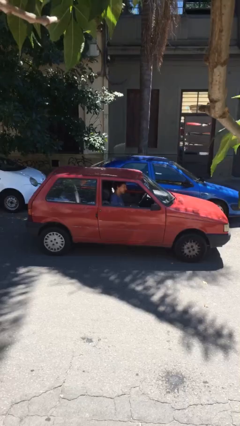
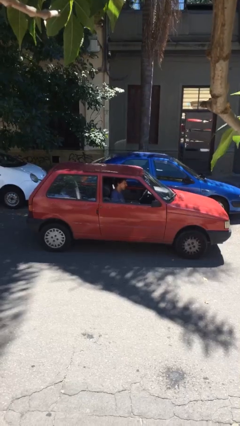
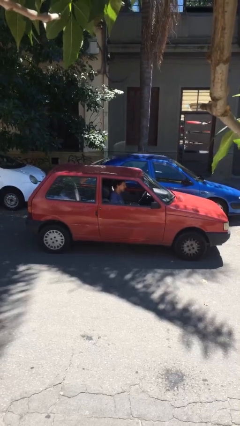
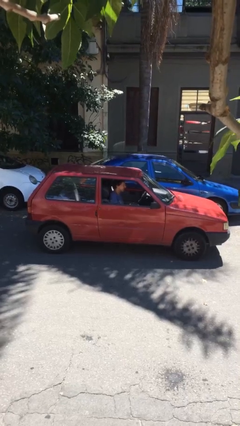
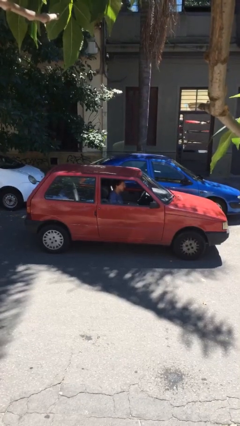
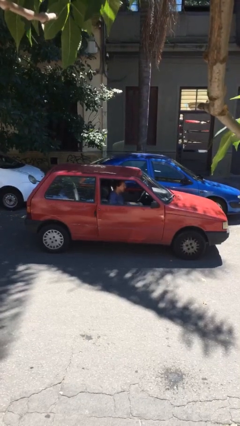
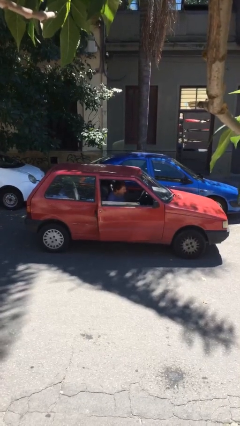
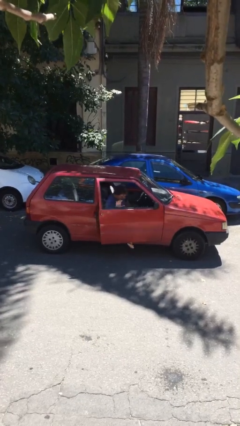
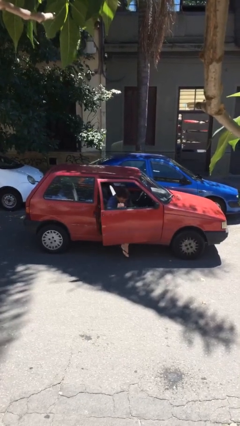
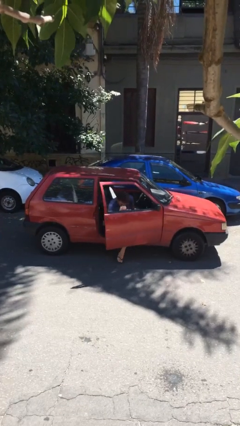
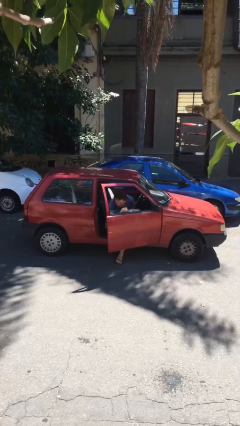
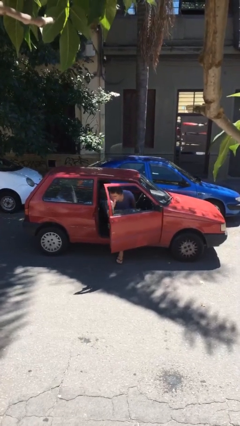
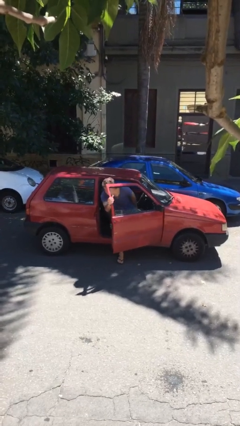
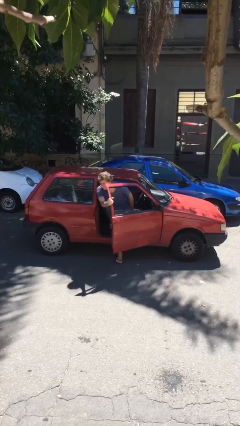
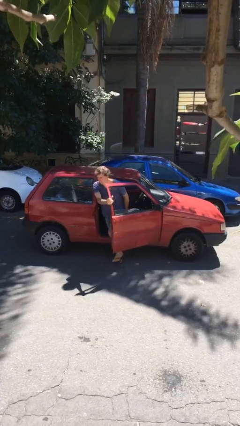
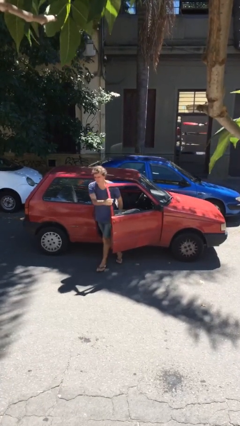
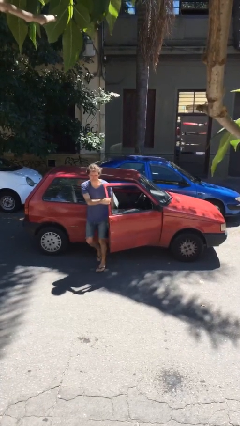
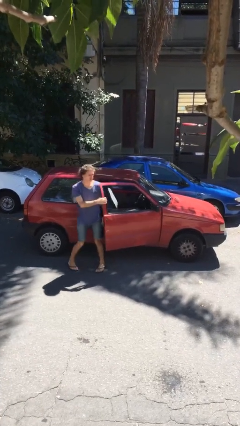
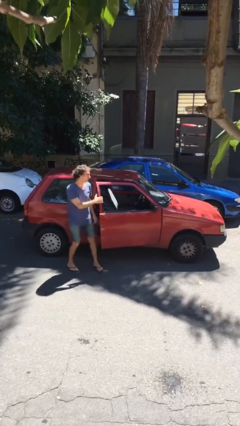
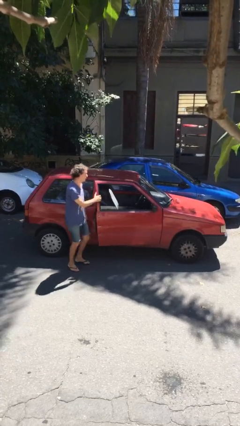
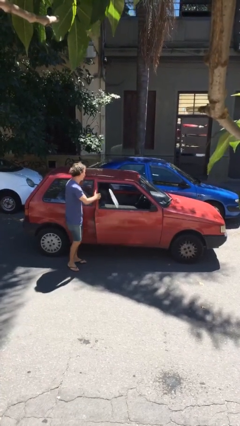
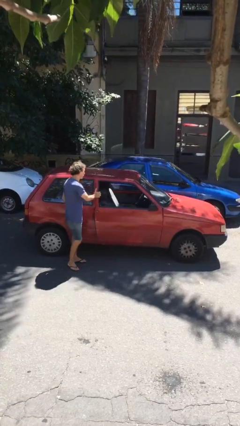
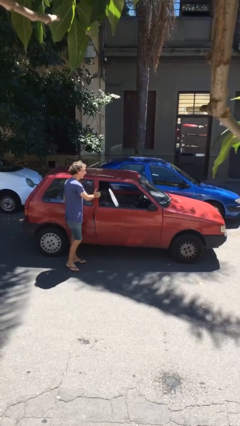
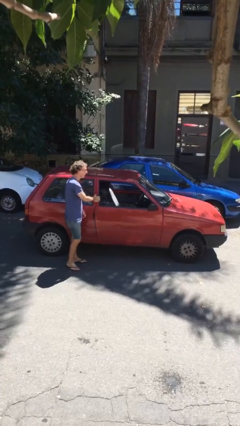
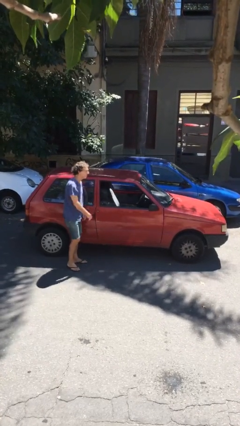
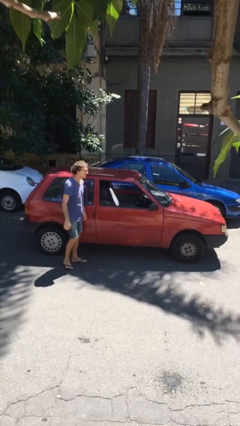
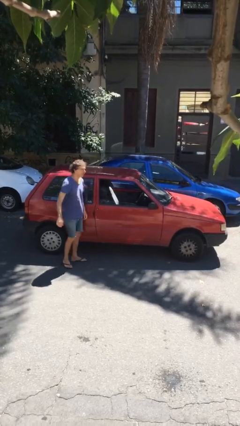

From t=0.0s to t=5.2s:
car drops off person

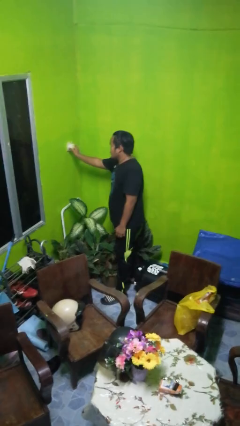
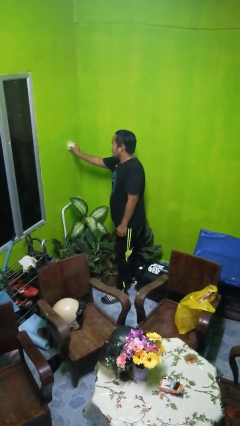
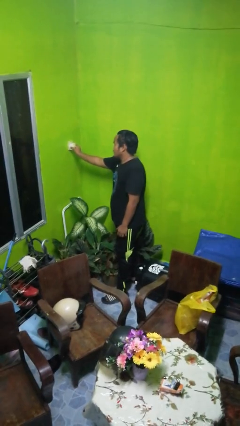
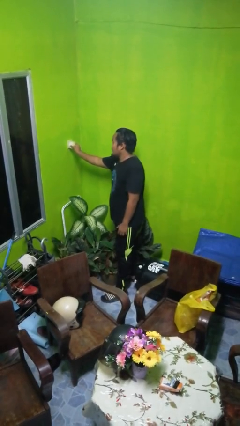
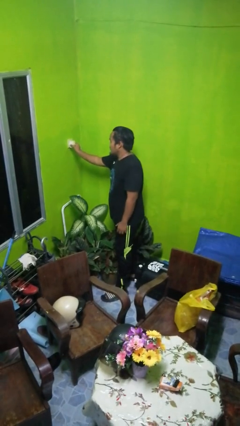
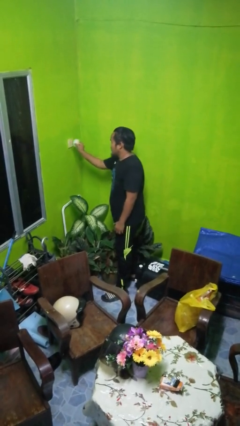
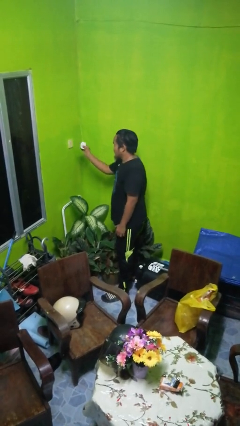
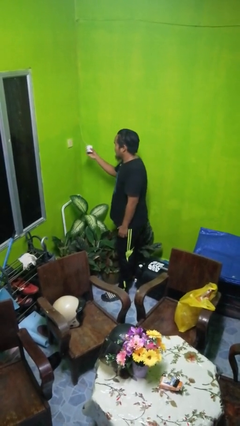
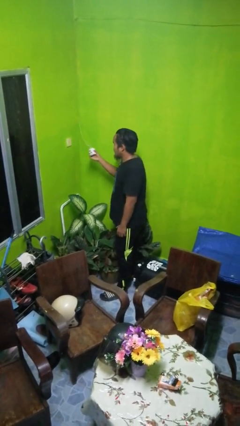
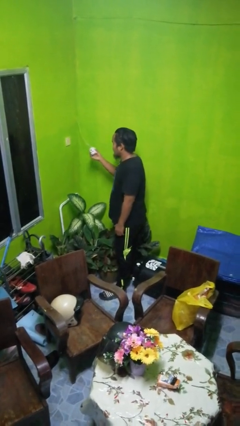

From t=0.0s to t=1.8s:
person unplugs from electrical socket

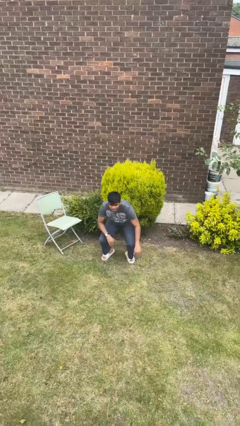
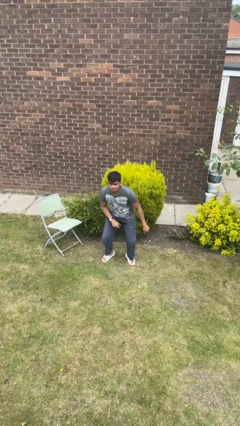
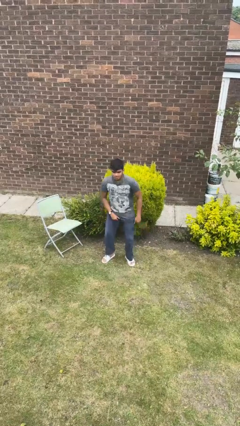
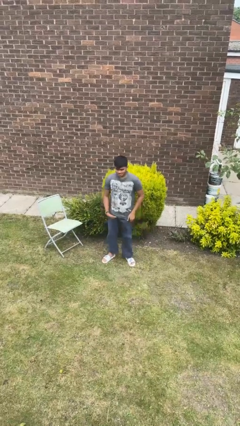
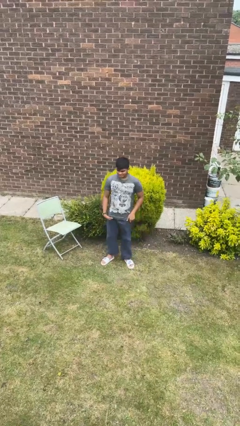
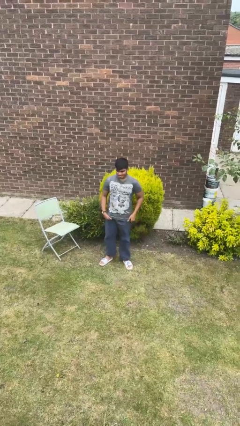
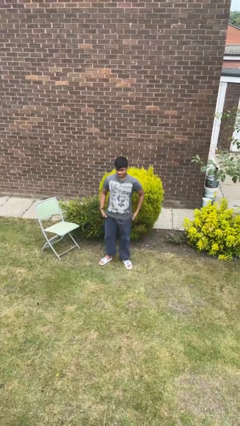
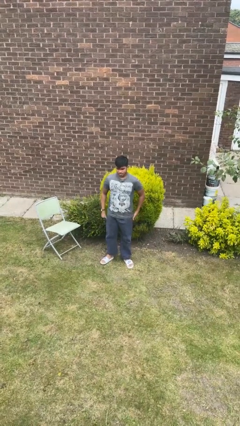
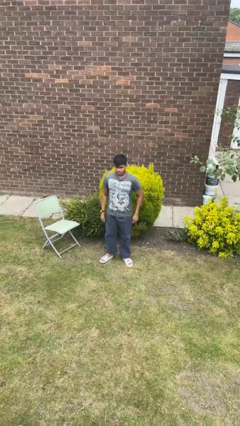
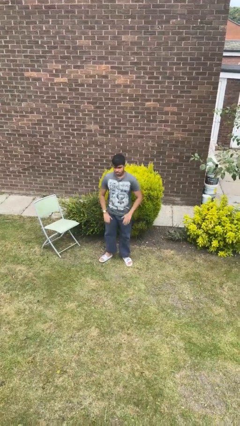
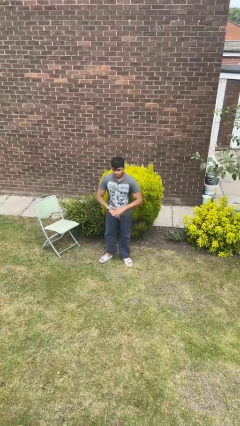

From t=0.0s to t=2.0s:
person stands up

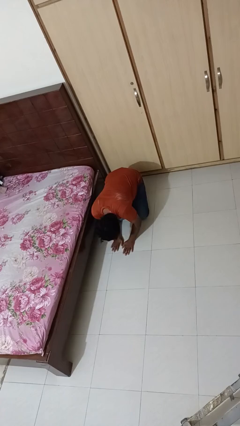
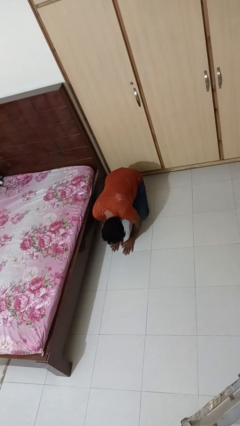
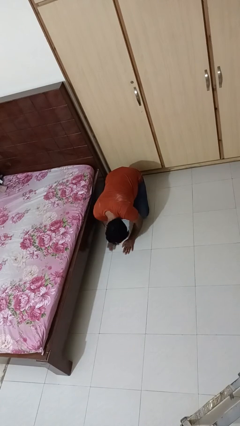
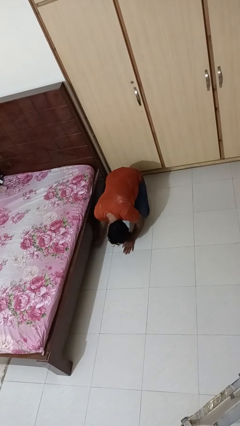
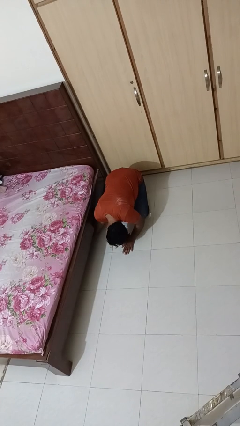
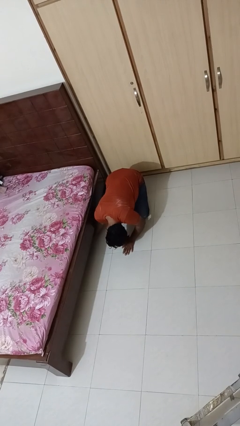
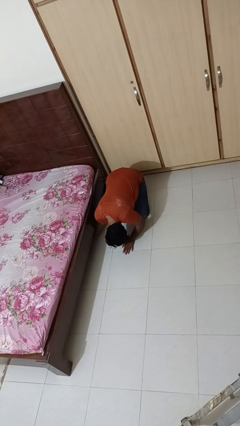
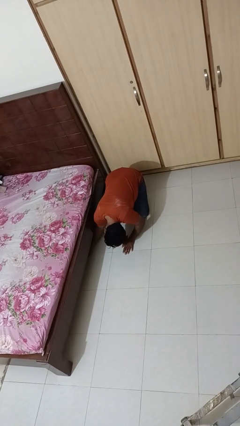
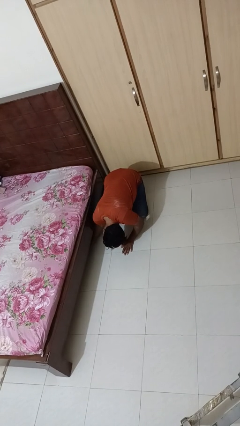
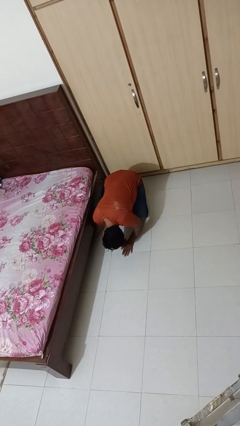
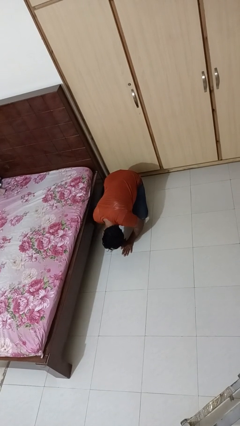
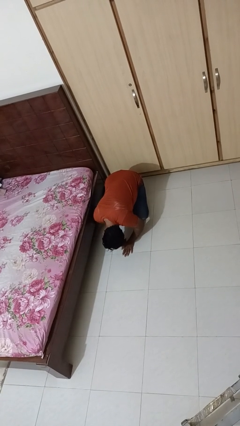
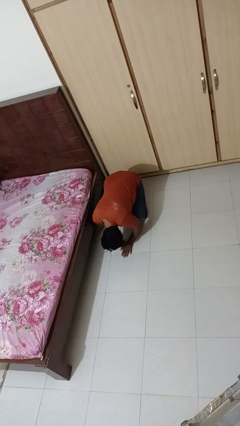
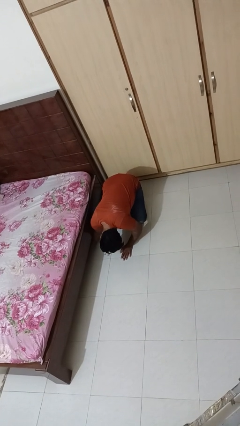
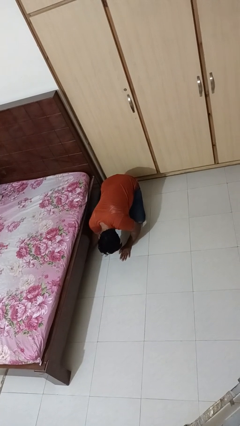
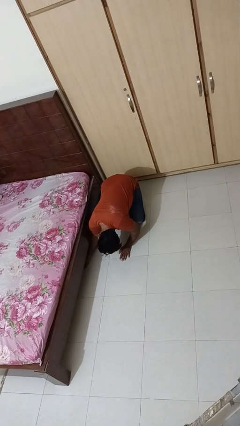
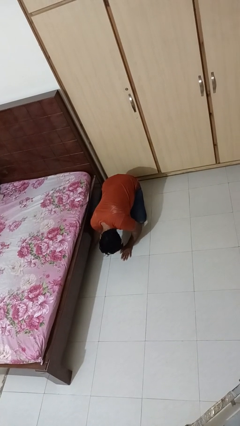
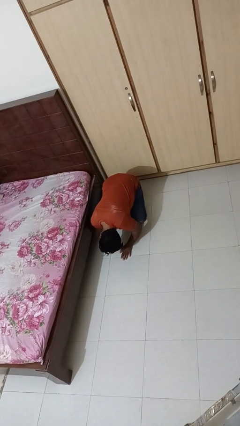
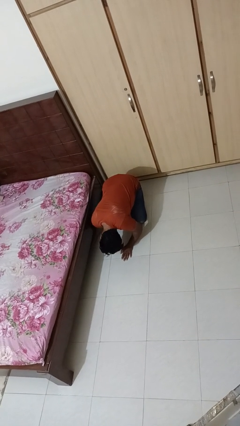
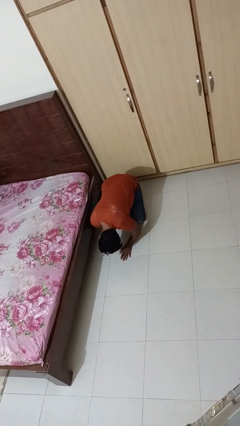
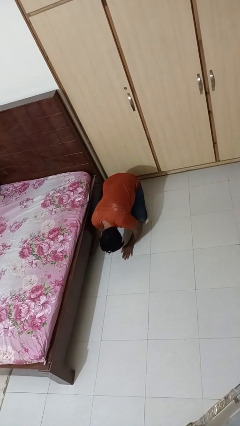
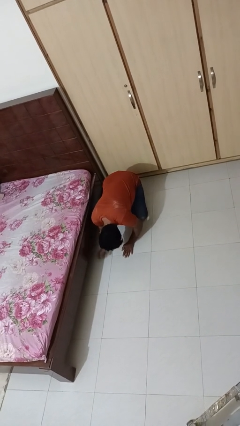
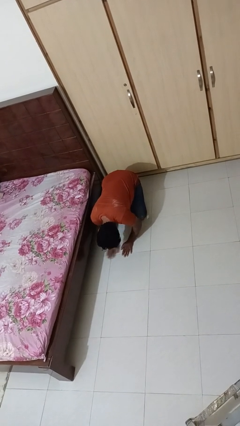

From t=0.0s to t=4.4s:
person searches under bed

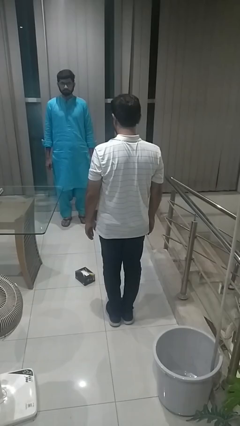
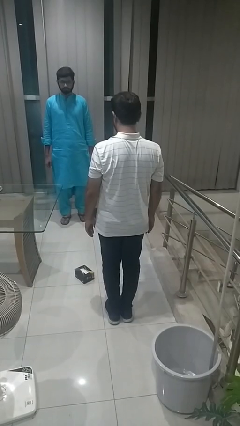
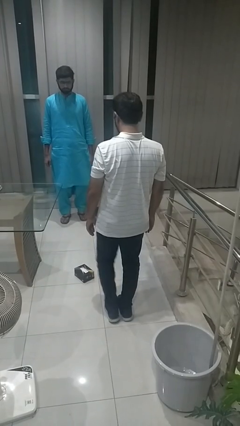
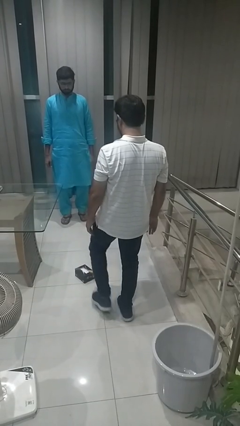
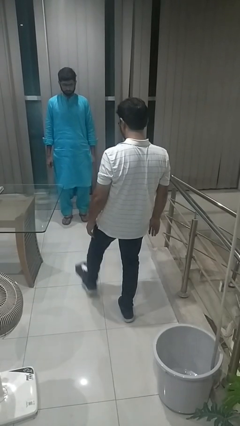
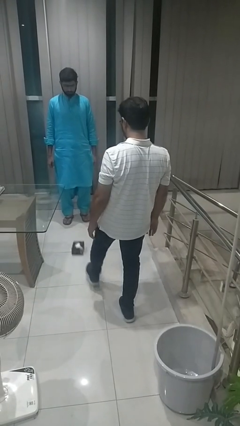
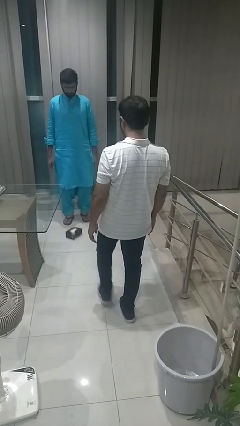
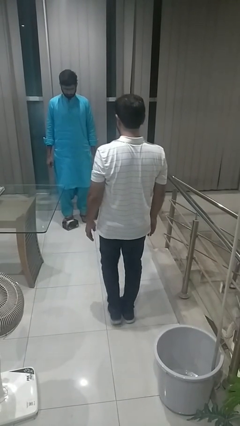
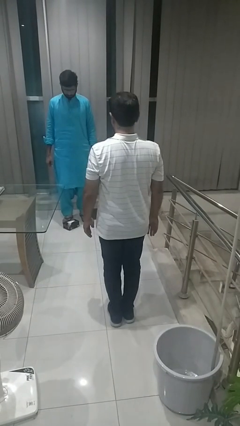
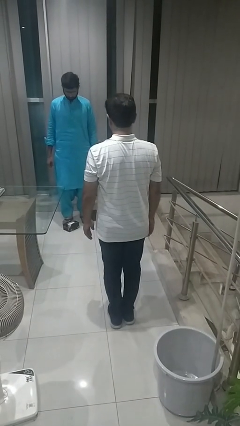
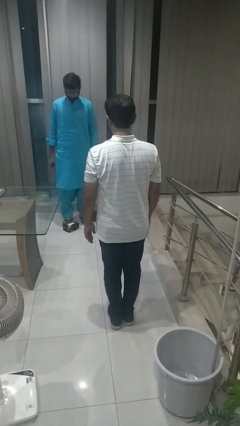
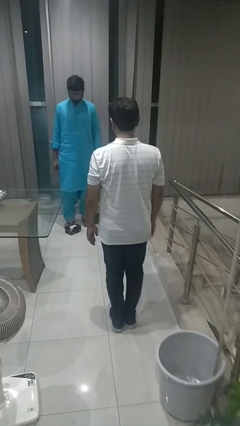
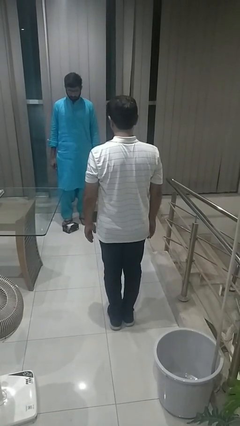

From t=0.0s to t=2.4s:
person kicks object to person

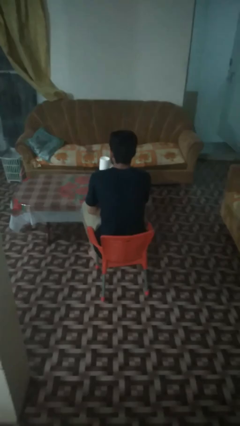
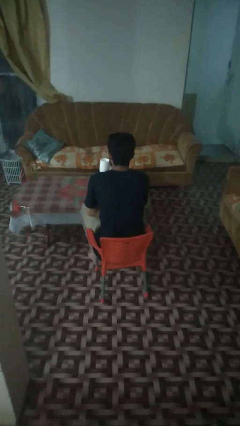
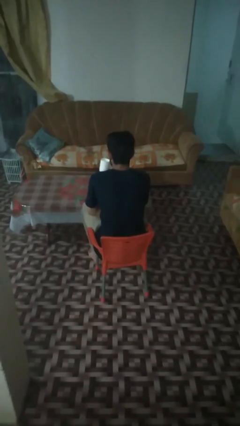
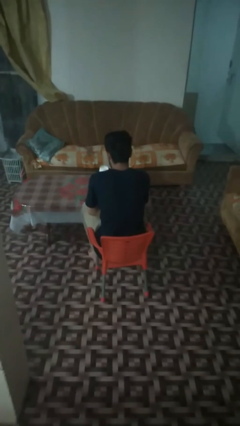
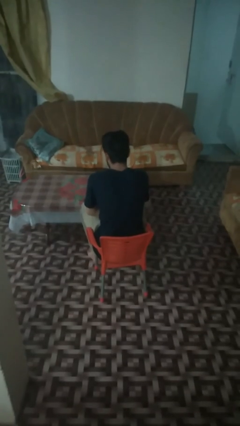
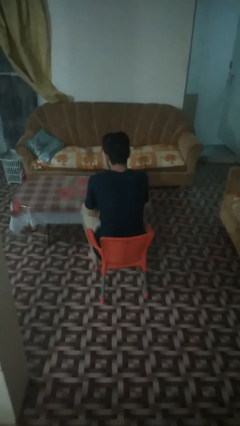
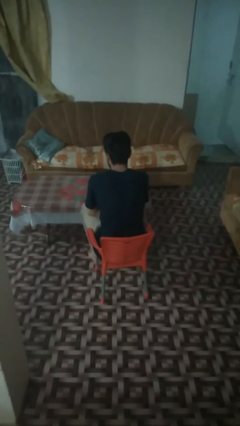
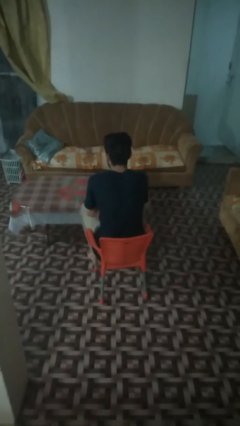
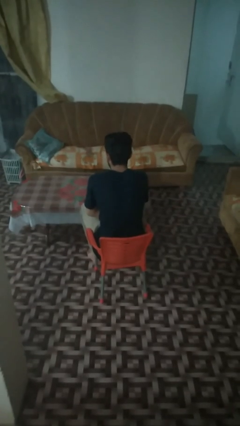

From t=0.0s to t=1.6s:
person puts down object on table
